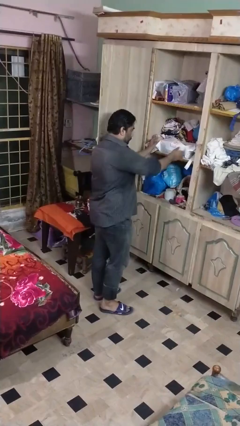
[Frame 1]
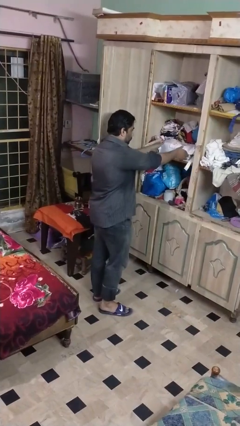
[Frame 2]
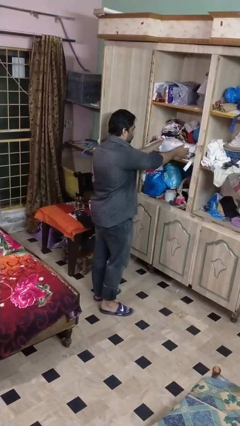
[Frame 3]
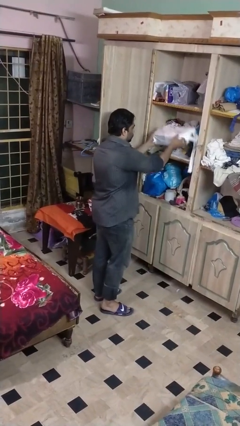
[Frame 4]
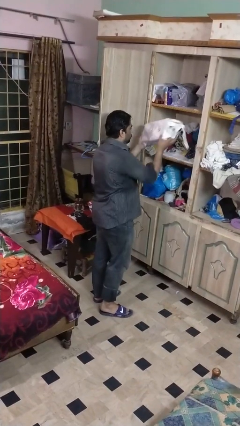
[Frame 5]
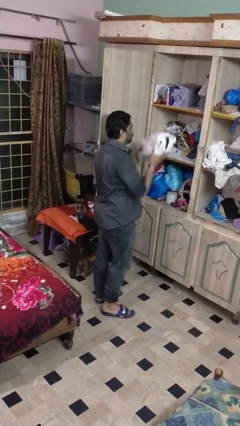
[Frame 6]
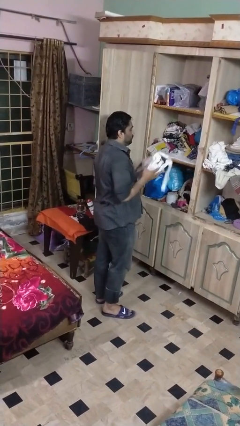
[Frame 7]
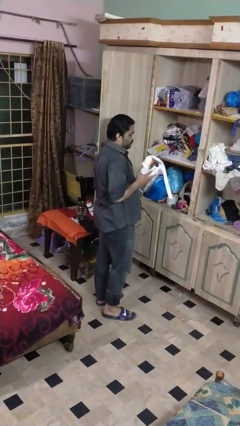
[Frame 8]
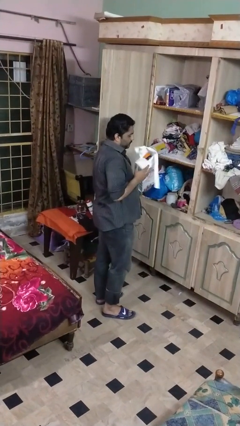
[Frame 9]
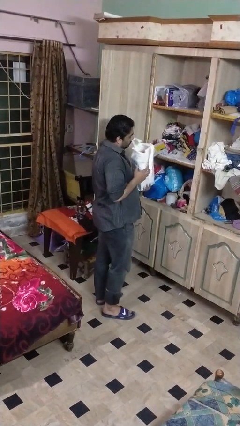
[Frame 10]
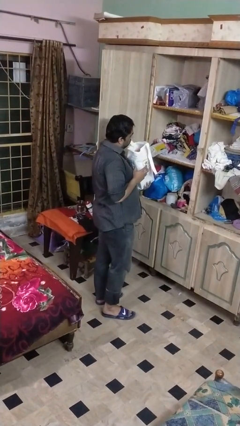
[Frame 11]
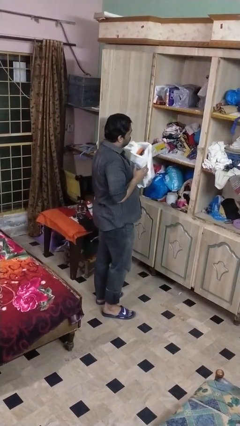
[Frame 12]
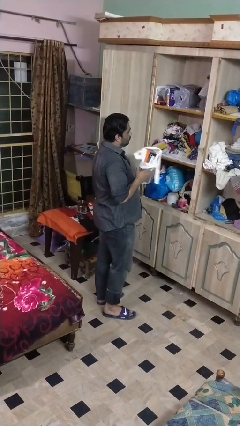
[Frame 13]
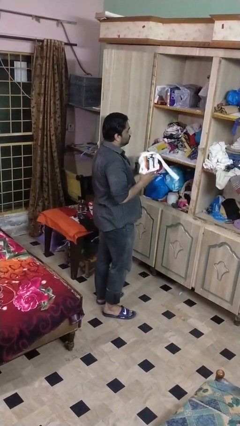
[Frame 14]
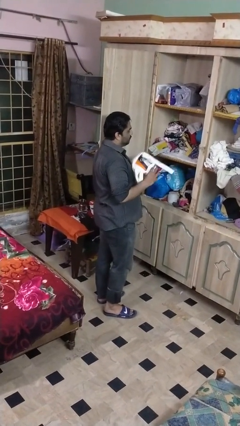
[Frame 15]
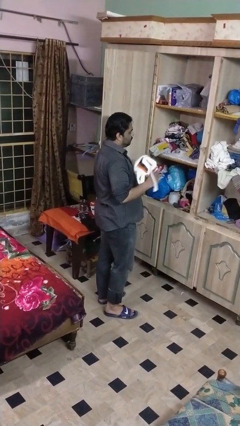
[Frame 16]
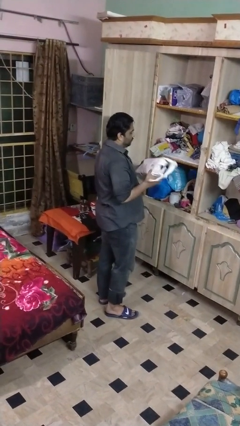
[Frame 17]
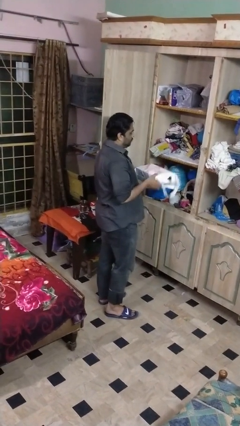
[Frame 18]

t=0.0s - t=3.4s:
person picks up object from cabinet

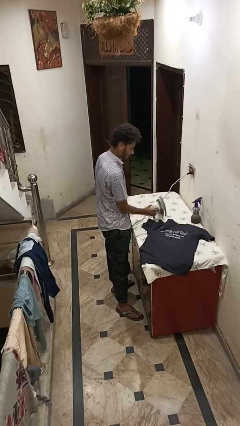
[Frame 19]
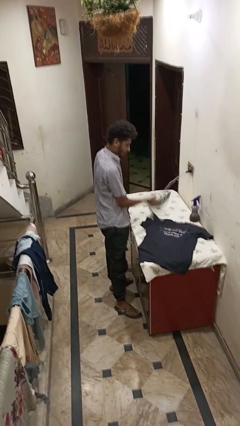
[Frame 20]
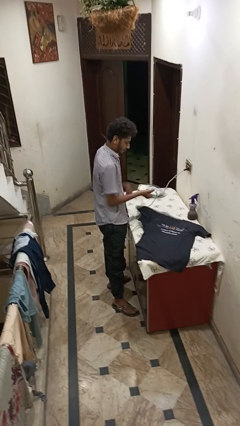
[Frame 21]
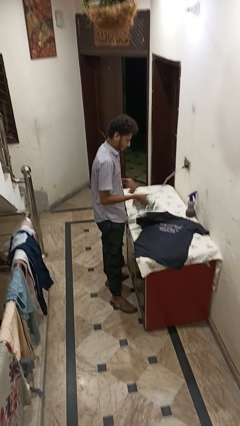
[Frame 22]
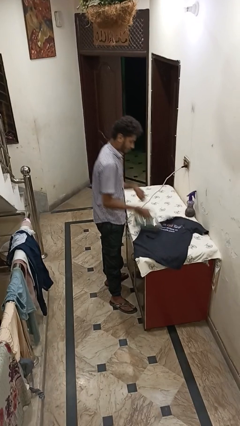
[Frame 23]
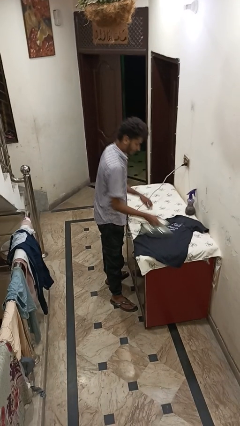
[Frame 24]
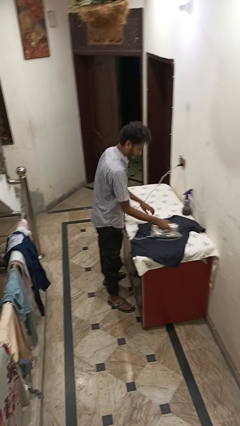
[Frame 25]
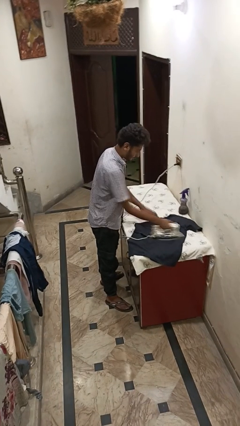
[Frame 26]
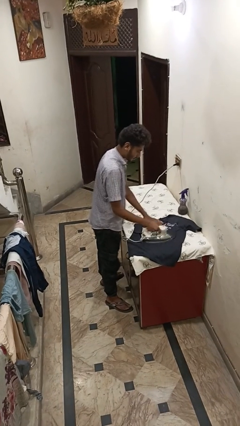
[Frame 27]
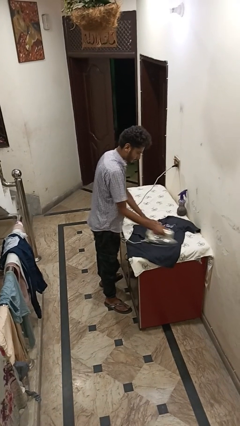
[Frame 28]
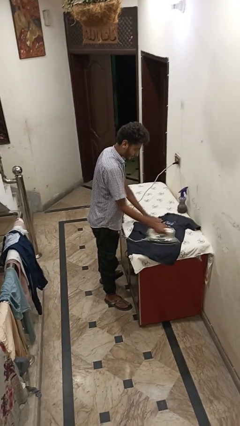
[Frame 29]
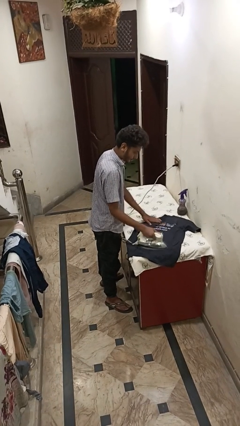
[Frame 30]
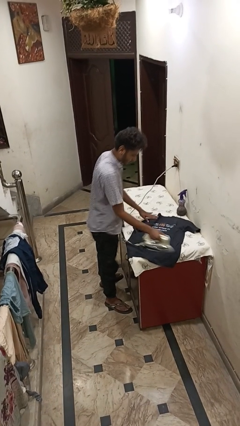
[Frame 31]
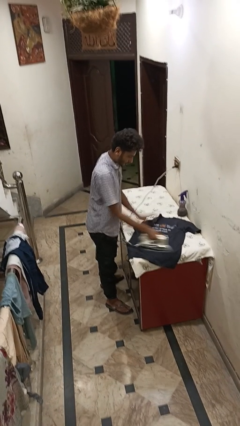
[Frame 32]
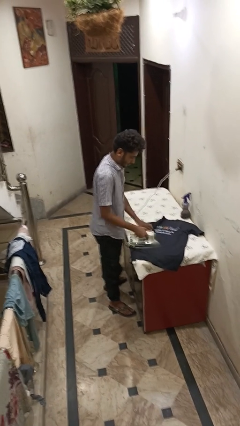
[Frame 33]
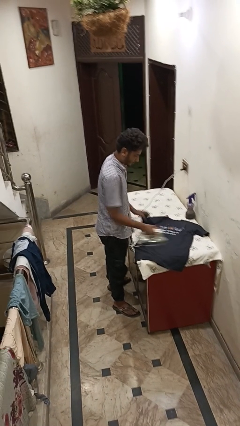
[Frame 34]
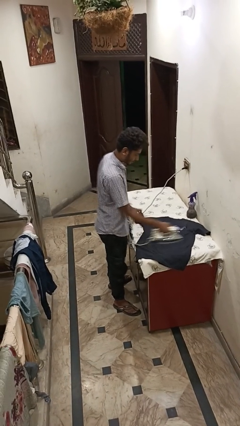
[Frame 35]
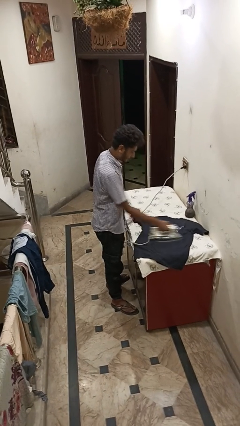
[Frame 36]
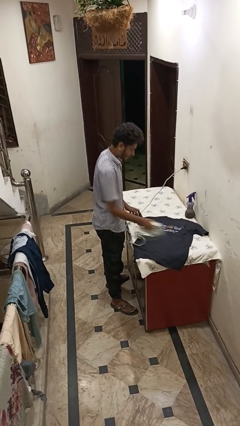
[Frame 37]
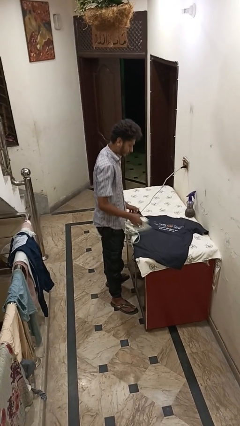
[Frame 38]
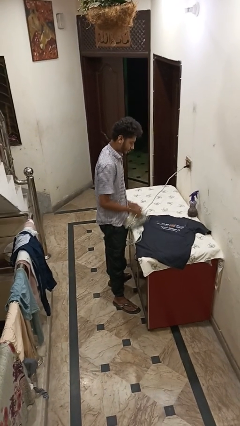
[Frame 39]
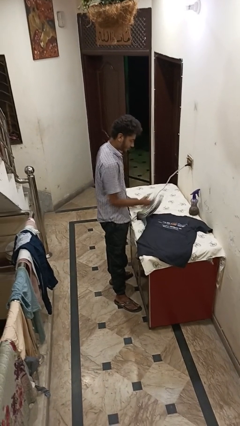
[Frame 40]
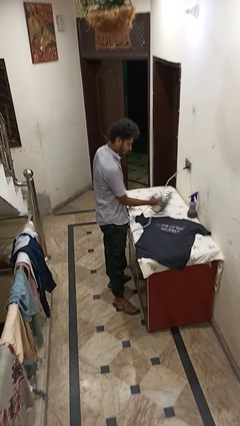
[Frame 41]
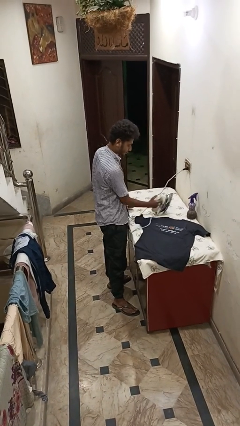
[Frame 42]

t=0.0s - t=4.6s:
person irons clothes

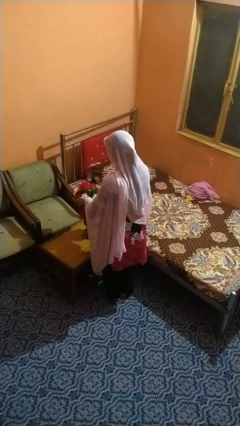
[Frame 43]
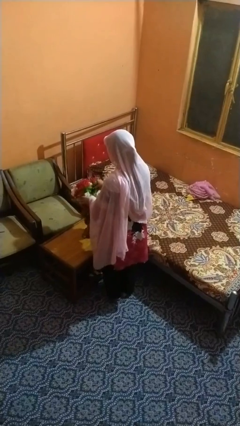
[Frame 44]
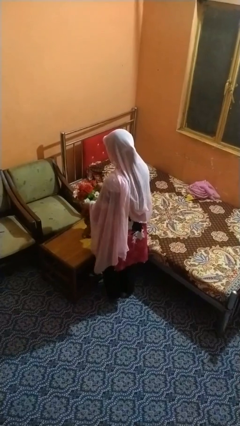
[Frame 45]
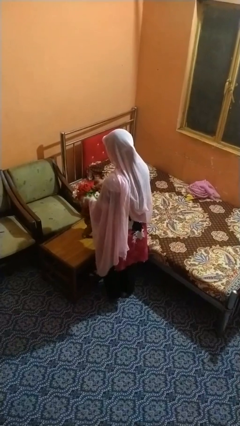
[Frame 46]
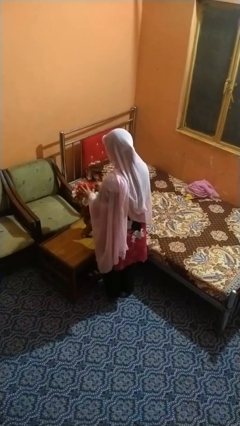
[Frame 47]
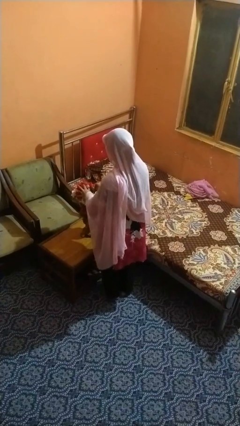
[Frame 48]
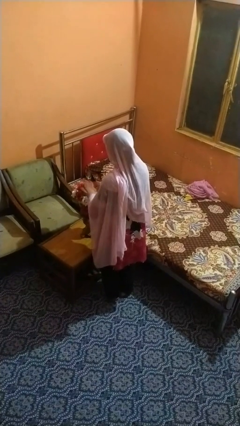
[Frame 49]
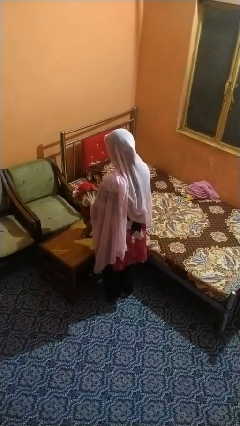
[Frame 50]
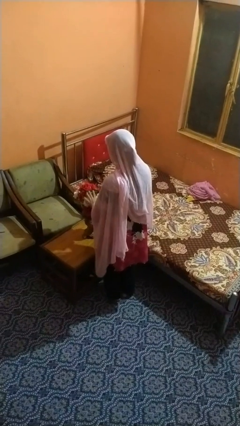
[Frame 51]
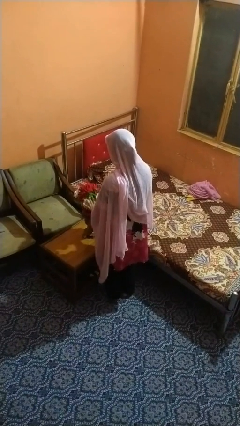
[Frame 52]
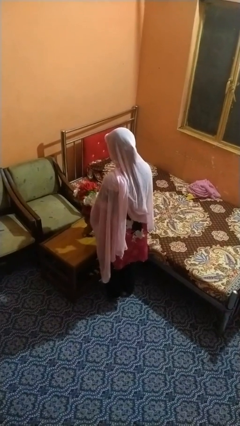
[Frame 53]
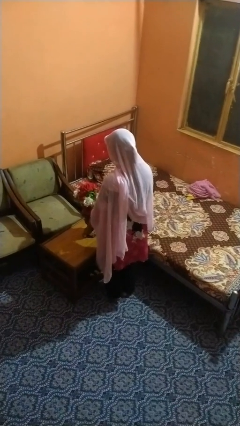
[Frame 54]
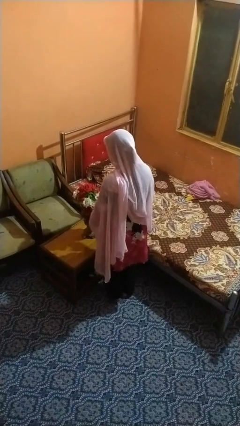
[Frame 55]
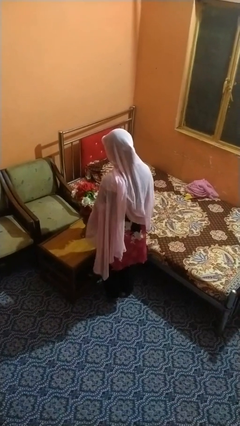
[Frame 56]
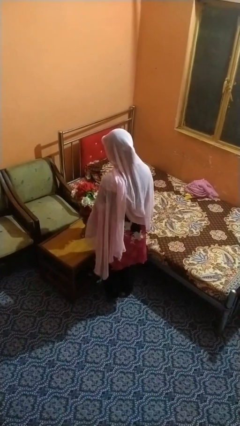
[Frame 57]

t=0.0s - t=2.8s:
person arranges flowers in vase

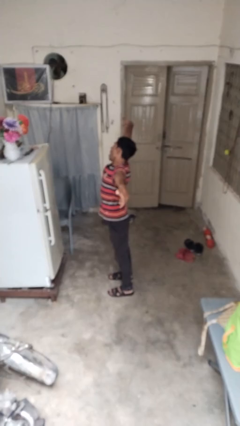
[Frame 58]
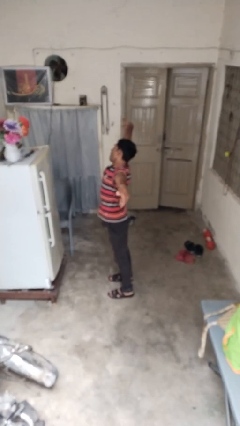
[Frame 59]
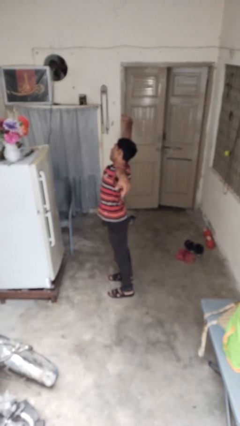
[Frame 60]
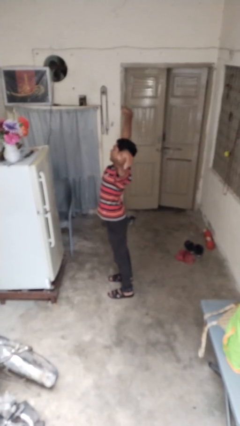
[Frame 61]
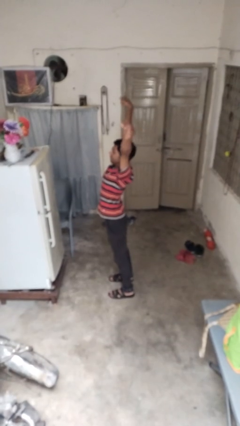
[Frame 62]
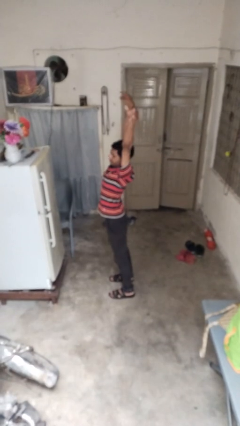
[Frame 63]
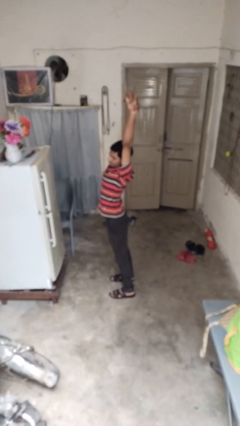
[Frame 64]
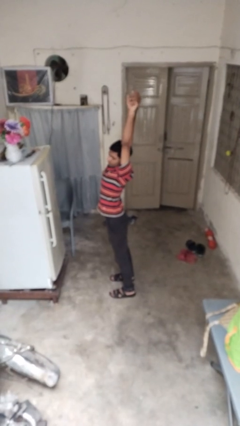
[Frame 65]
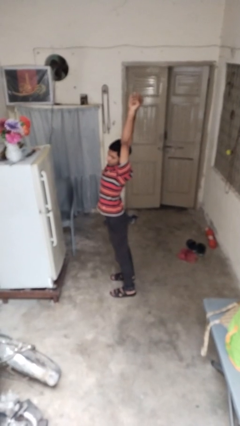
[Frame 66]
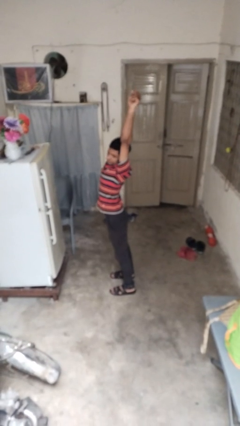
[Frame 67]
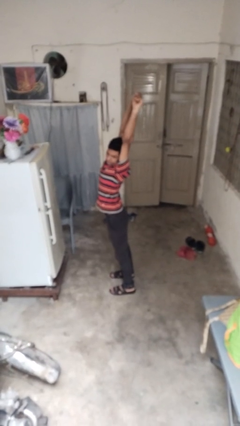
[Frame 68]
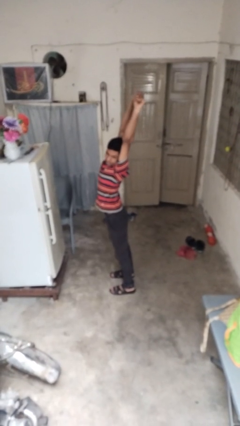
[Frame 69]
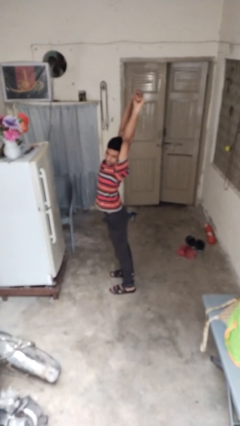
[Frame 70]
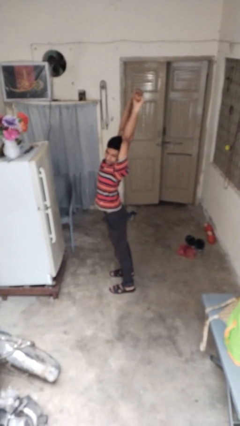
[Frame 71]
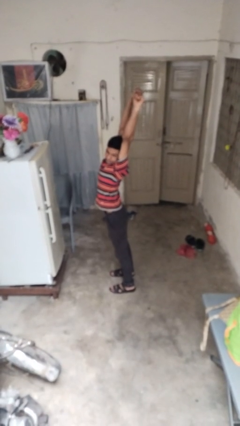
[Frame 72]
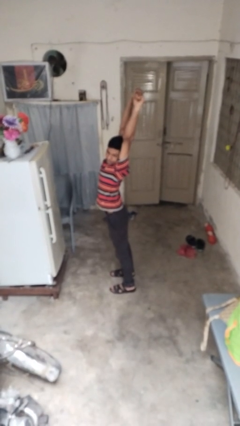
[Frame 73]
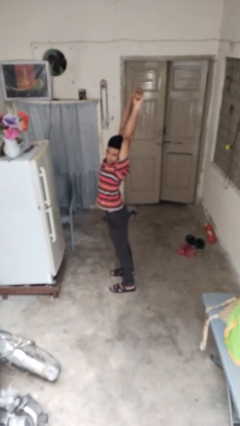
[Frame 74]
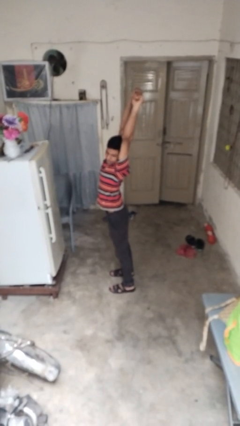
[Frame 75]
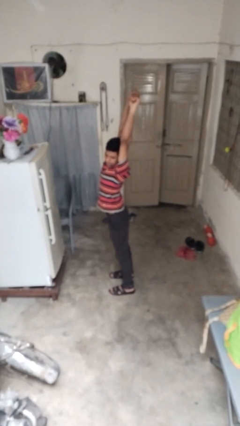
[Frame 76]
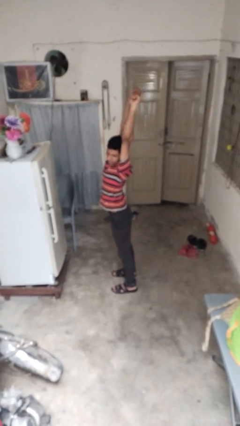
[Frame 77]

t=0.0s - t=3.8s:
person stretches arms over head

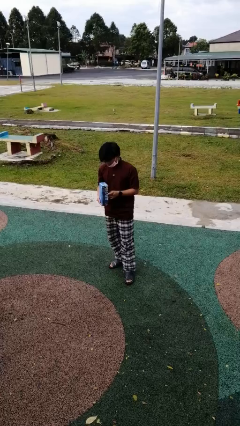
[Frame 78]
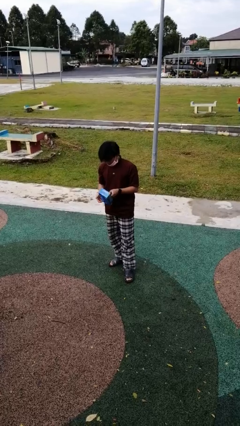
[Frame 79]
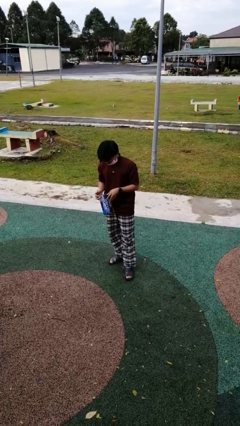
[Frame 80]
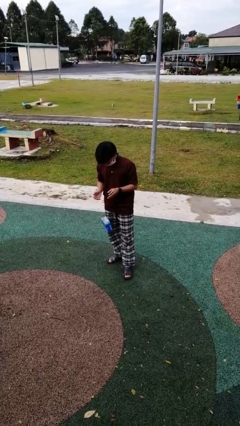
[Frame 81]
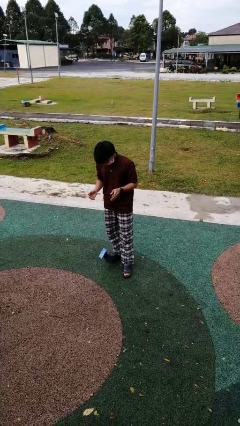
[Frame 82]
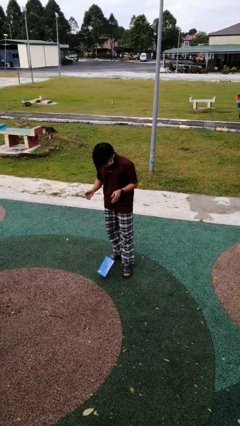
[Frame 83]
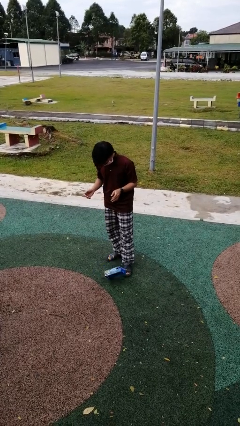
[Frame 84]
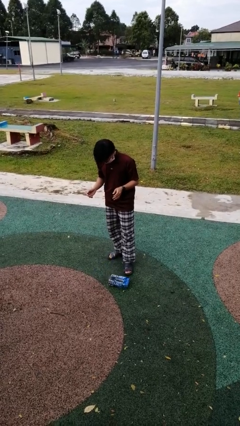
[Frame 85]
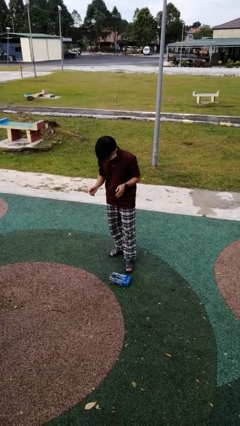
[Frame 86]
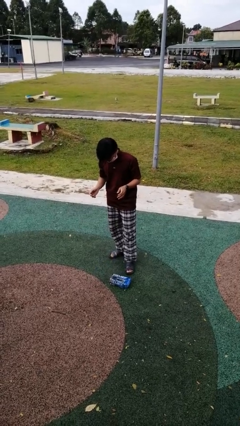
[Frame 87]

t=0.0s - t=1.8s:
person drops object

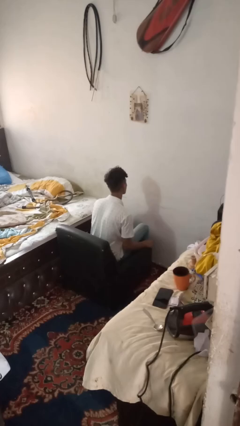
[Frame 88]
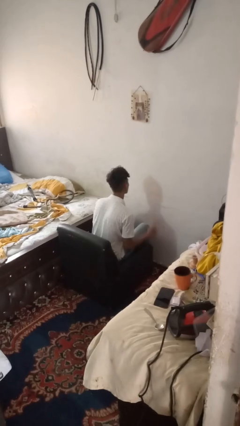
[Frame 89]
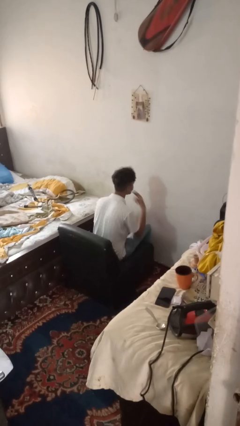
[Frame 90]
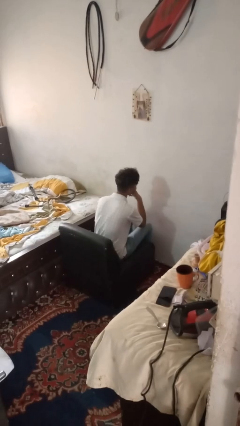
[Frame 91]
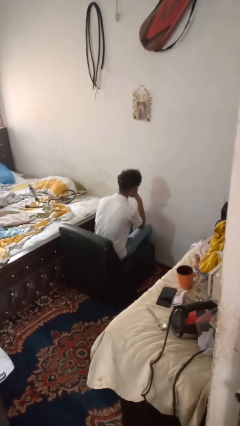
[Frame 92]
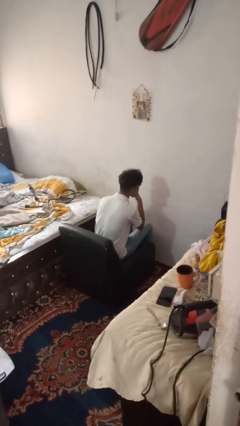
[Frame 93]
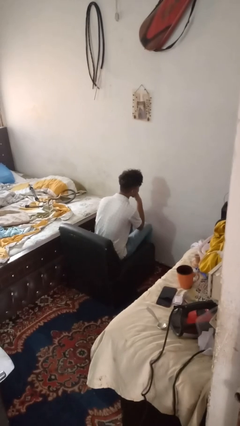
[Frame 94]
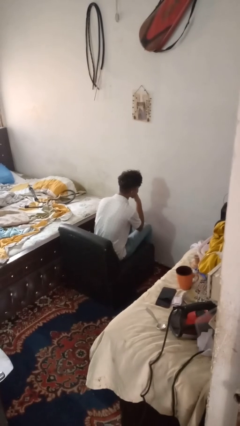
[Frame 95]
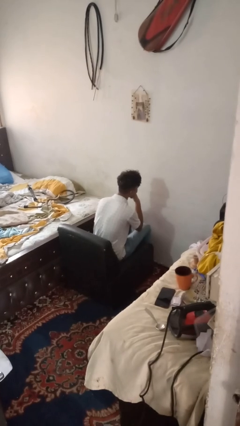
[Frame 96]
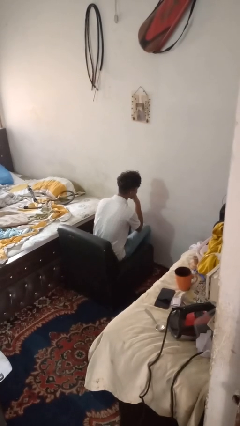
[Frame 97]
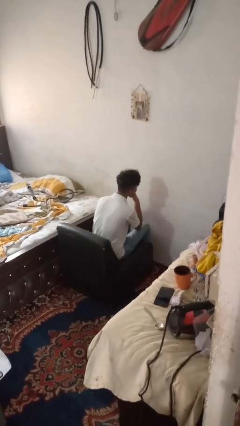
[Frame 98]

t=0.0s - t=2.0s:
person strokes chin
